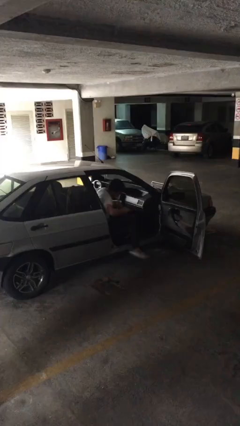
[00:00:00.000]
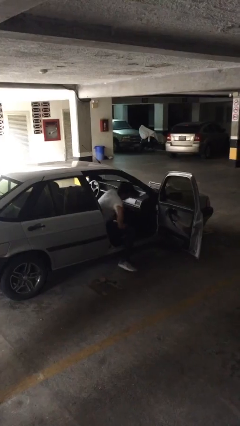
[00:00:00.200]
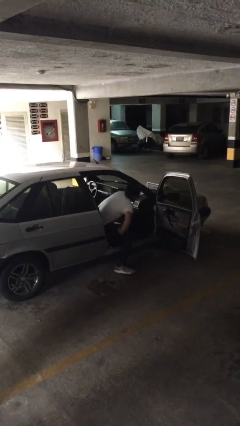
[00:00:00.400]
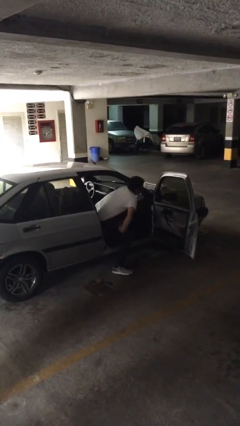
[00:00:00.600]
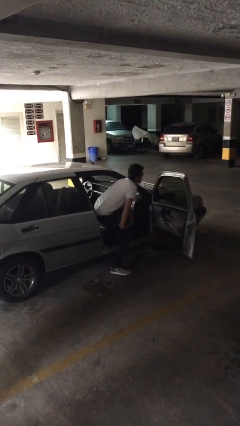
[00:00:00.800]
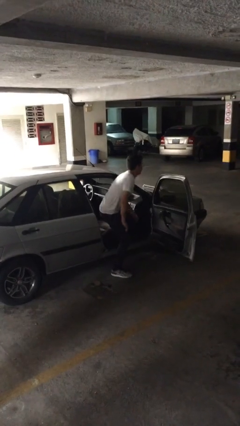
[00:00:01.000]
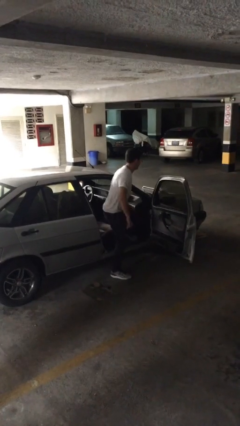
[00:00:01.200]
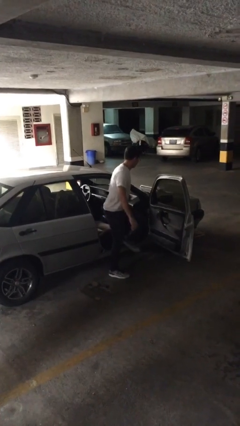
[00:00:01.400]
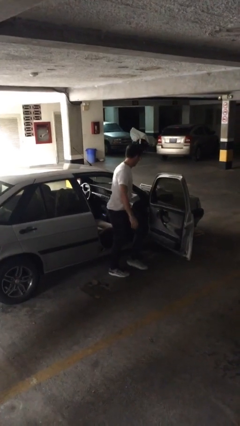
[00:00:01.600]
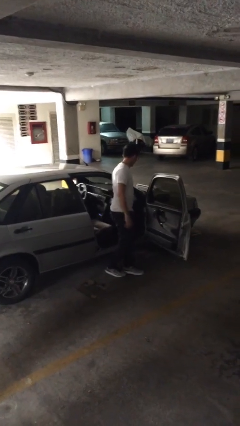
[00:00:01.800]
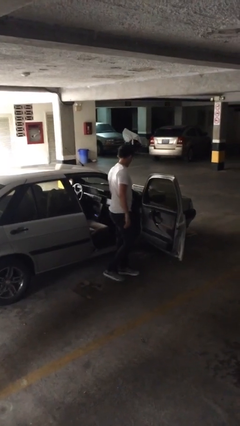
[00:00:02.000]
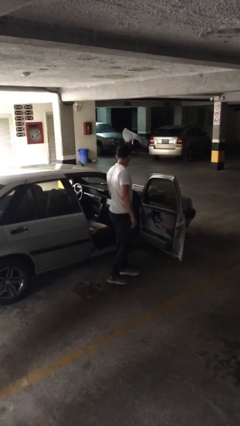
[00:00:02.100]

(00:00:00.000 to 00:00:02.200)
person exits car

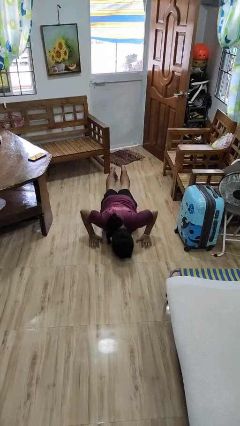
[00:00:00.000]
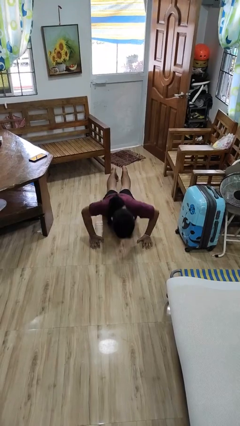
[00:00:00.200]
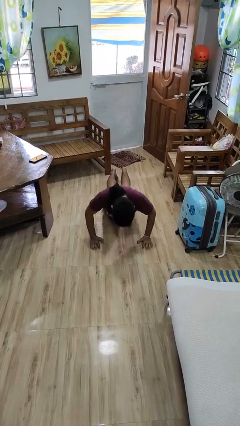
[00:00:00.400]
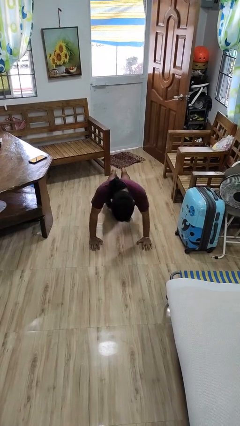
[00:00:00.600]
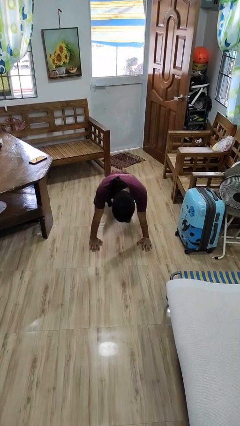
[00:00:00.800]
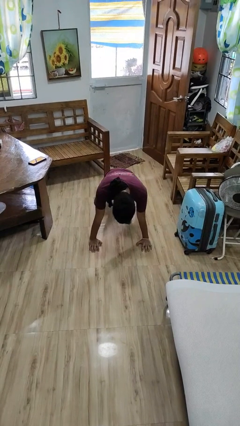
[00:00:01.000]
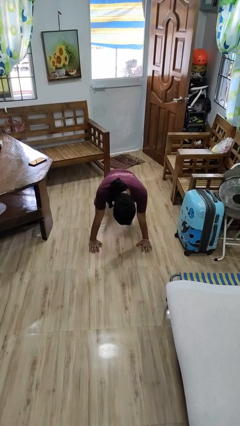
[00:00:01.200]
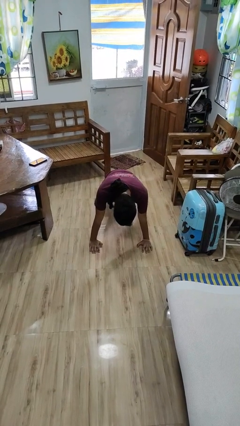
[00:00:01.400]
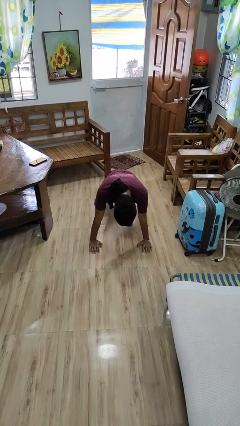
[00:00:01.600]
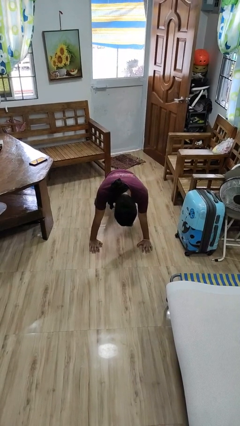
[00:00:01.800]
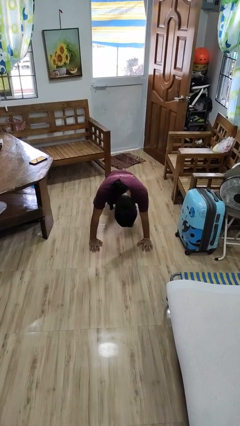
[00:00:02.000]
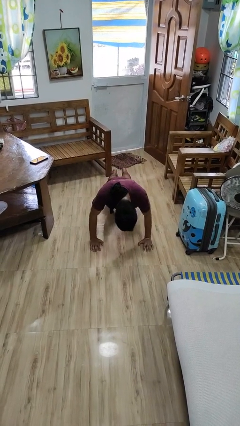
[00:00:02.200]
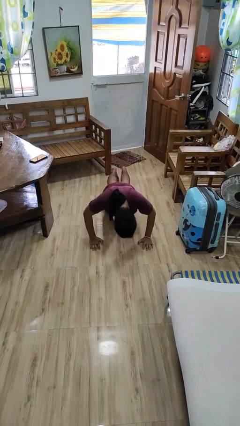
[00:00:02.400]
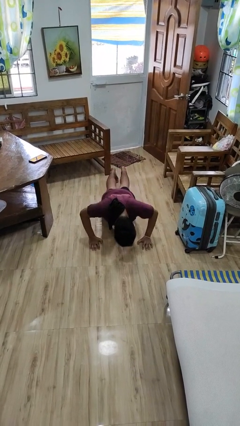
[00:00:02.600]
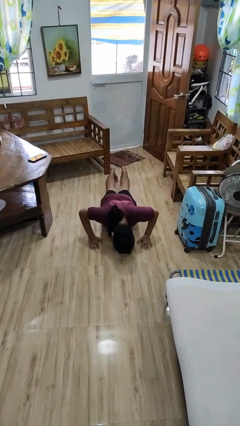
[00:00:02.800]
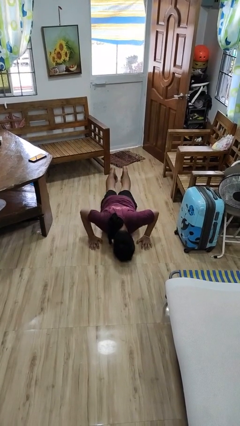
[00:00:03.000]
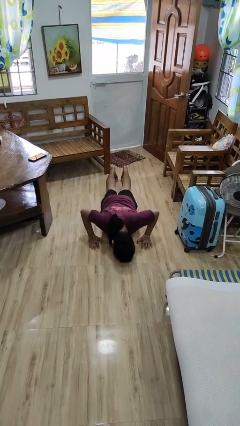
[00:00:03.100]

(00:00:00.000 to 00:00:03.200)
person exercises with pushup

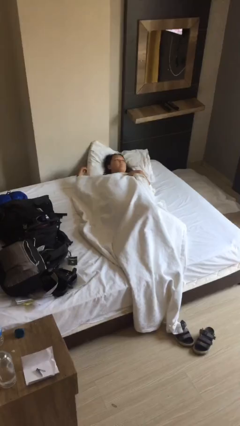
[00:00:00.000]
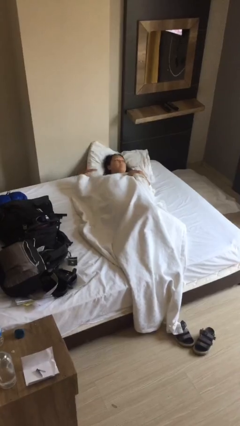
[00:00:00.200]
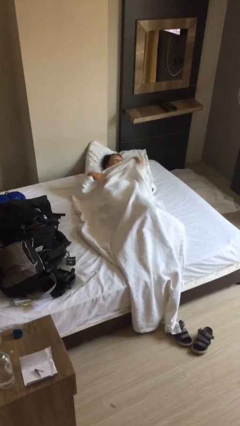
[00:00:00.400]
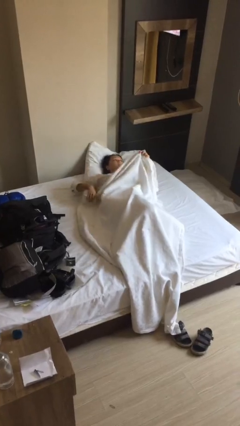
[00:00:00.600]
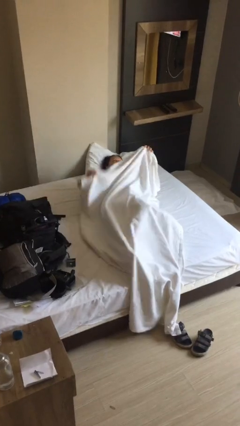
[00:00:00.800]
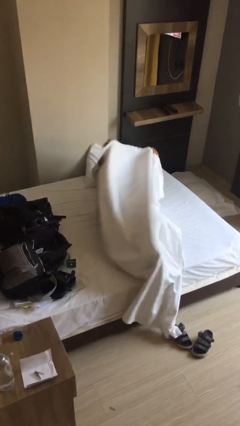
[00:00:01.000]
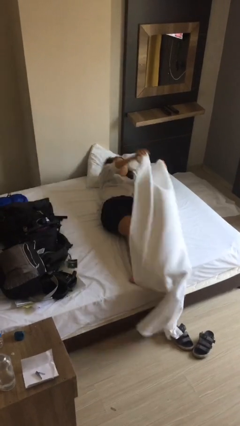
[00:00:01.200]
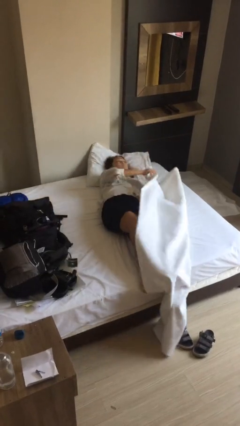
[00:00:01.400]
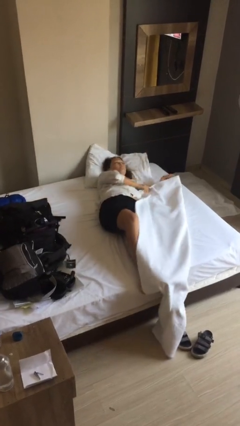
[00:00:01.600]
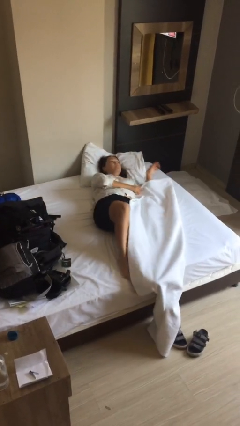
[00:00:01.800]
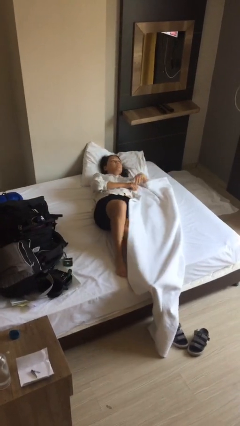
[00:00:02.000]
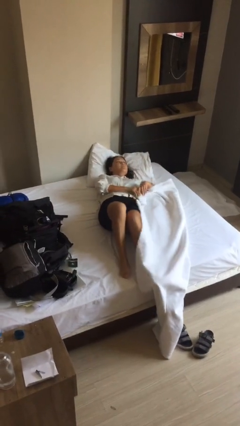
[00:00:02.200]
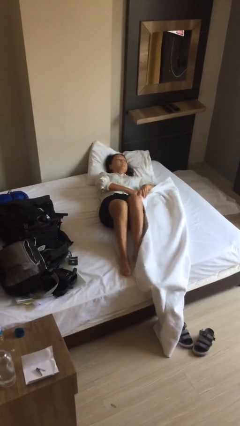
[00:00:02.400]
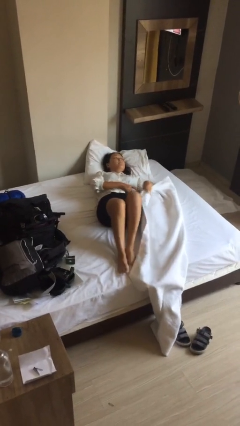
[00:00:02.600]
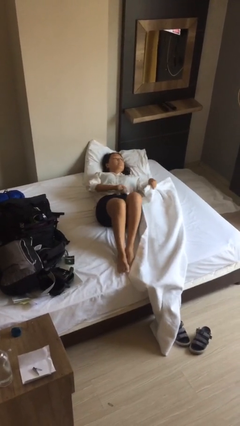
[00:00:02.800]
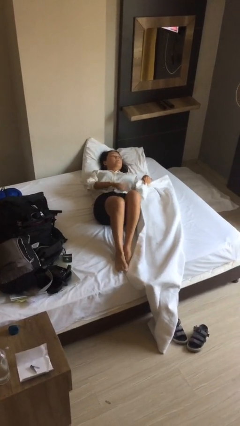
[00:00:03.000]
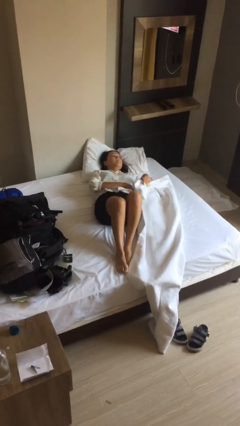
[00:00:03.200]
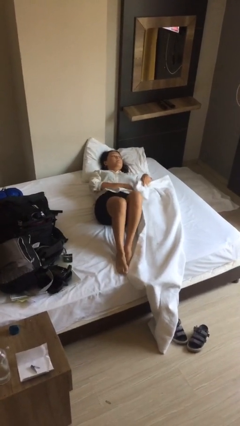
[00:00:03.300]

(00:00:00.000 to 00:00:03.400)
person uncovers with bedsheets

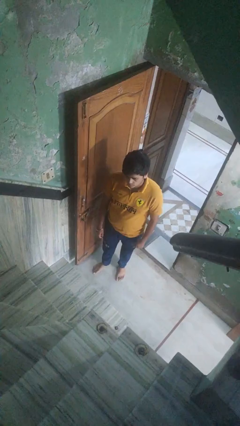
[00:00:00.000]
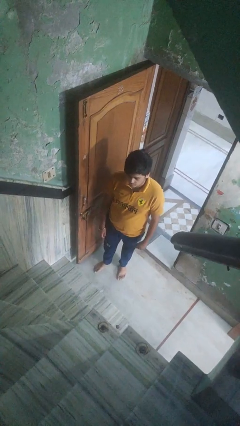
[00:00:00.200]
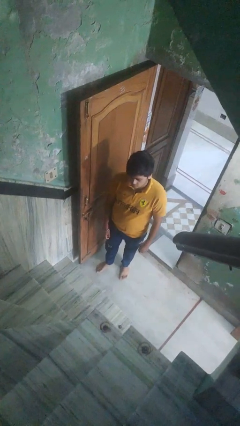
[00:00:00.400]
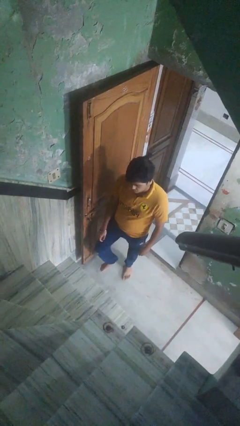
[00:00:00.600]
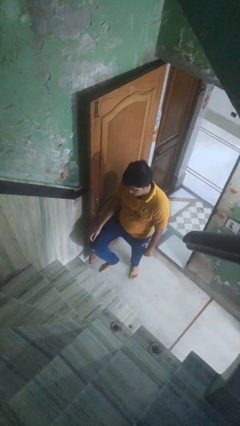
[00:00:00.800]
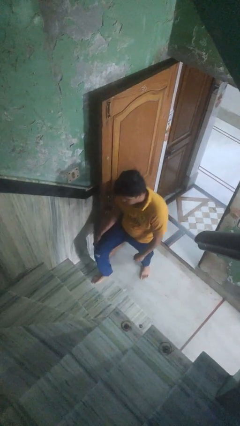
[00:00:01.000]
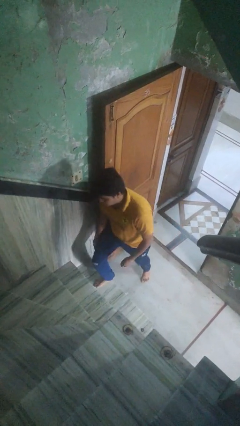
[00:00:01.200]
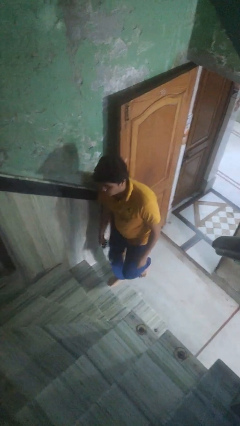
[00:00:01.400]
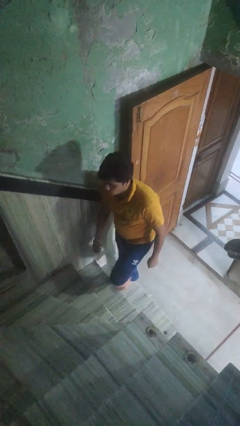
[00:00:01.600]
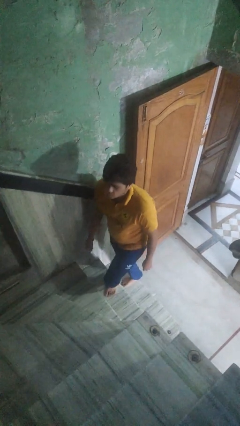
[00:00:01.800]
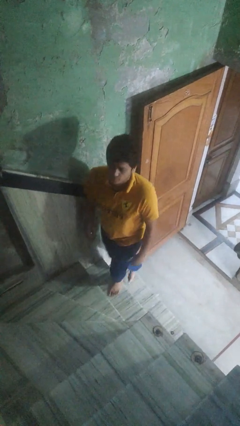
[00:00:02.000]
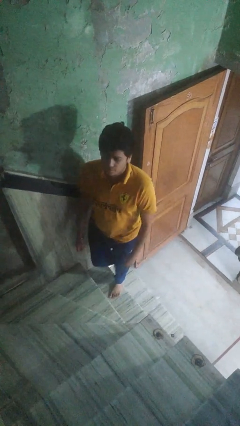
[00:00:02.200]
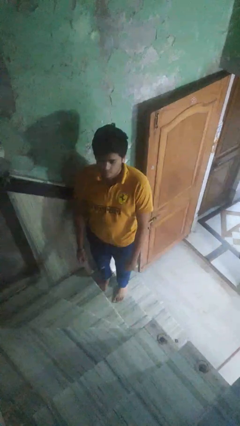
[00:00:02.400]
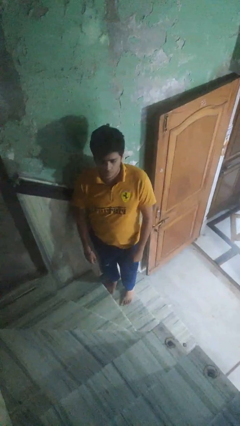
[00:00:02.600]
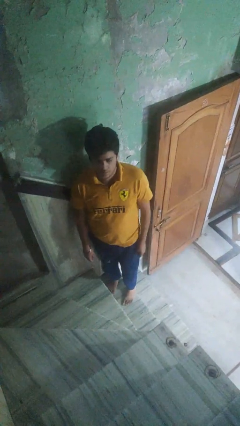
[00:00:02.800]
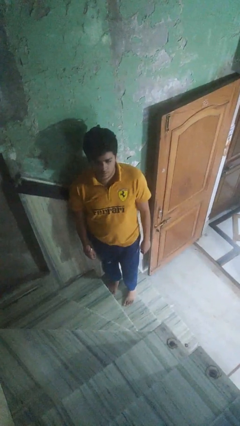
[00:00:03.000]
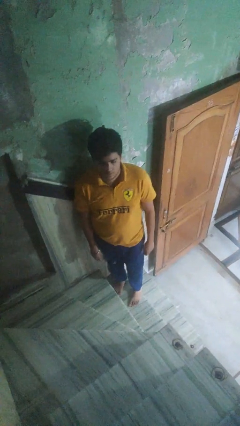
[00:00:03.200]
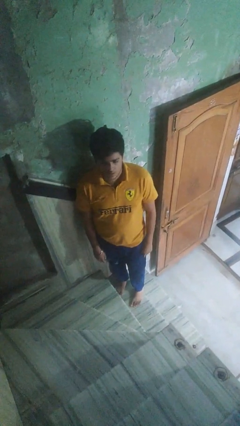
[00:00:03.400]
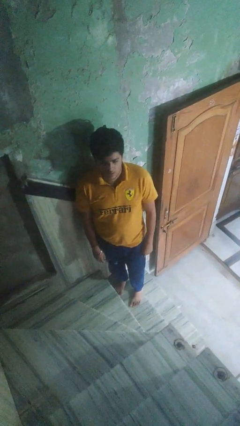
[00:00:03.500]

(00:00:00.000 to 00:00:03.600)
person climbs up stairs

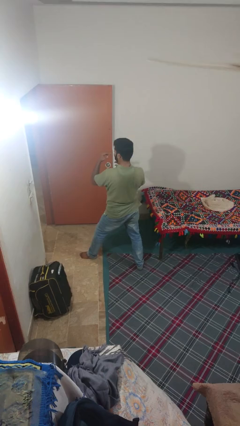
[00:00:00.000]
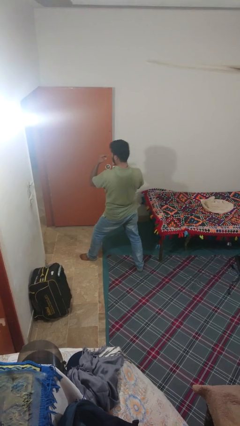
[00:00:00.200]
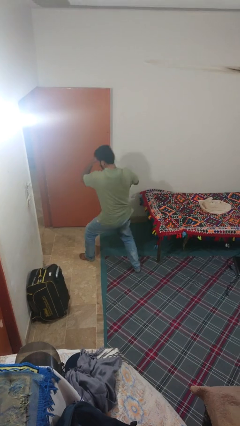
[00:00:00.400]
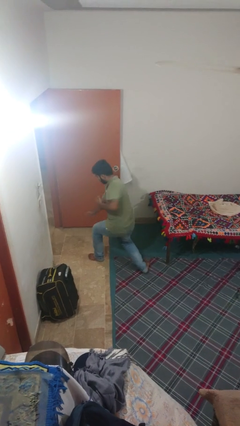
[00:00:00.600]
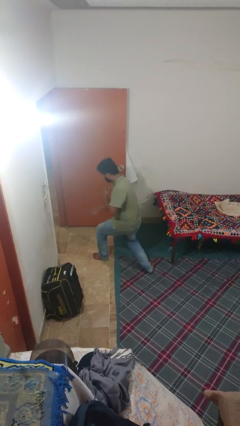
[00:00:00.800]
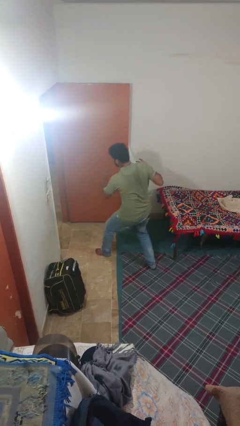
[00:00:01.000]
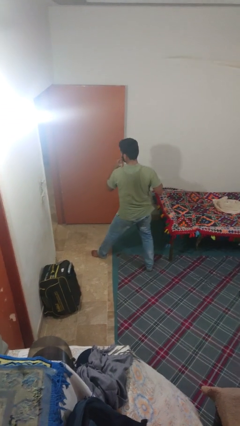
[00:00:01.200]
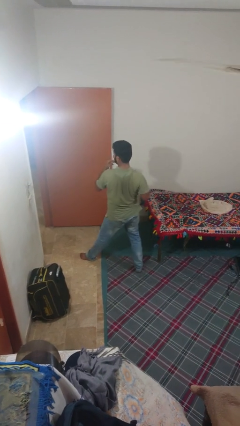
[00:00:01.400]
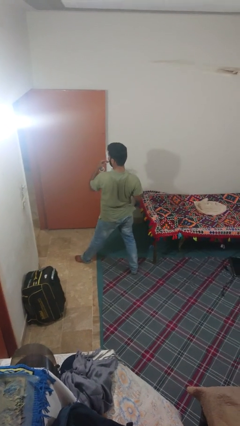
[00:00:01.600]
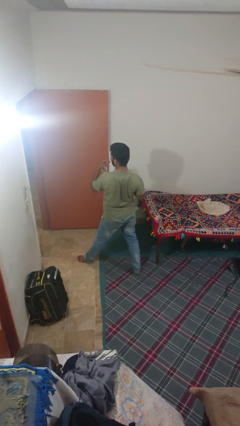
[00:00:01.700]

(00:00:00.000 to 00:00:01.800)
person karate chop

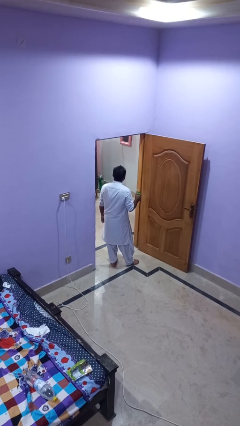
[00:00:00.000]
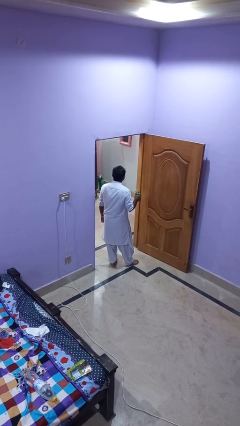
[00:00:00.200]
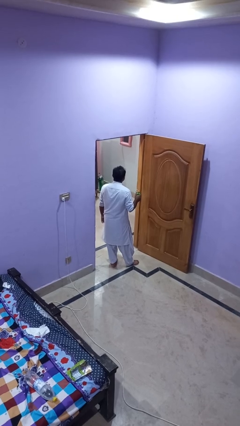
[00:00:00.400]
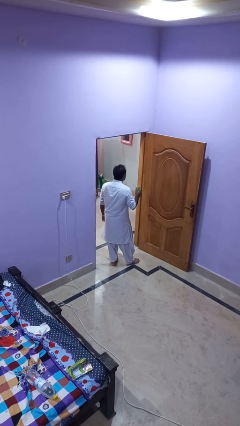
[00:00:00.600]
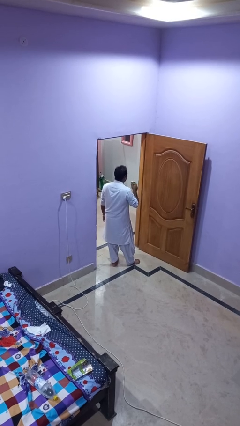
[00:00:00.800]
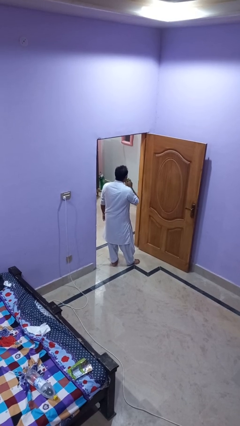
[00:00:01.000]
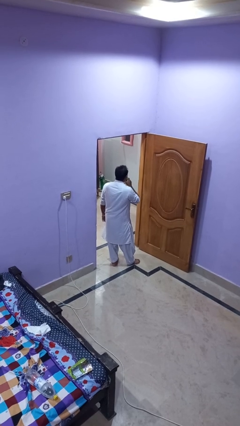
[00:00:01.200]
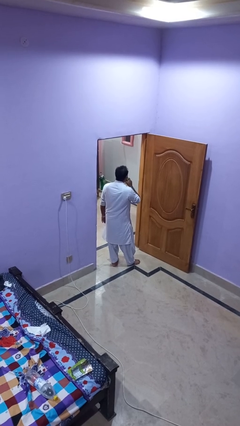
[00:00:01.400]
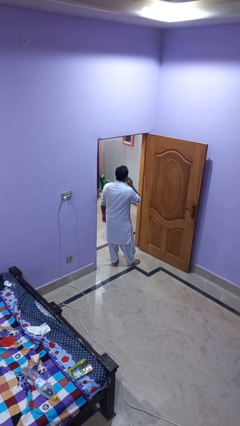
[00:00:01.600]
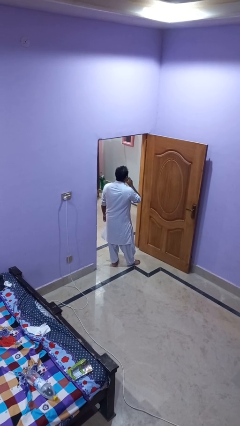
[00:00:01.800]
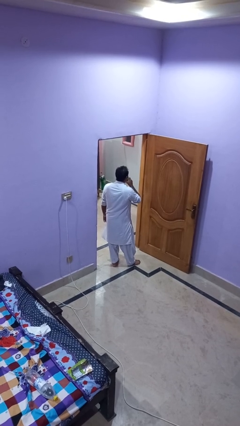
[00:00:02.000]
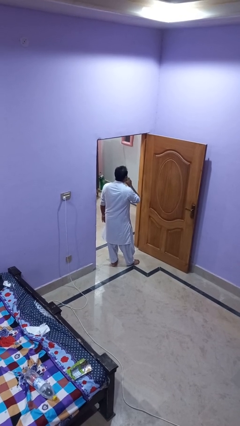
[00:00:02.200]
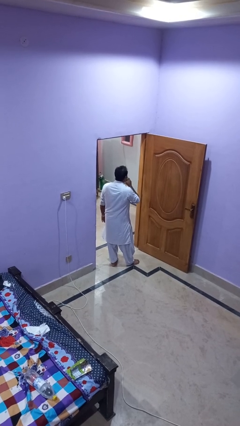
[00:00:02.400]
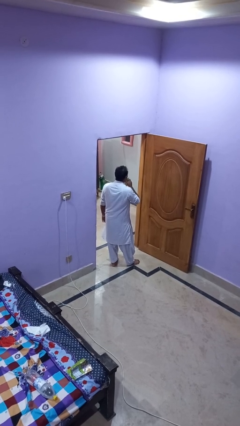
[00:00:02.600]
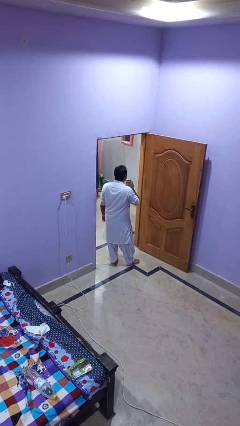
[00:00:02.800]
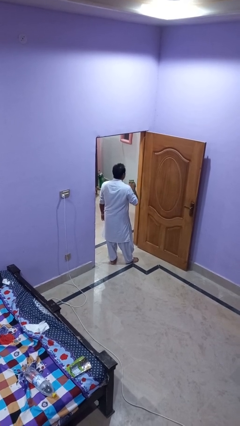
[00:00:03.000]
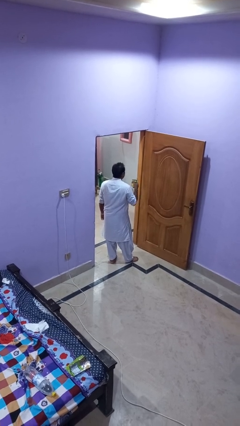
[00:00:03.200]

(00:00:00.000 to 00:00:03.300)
person drinks from straw
